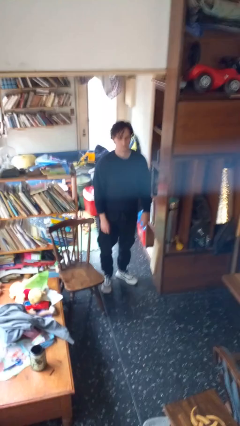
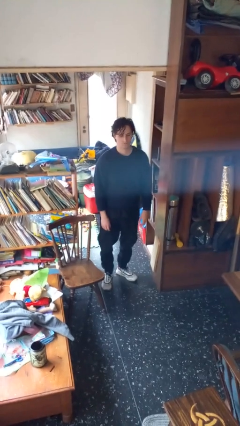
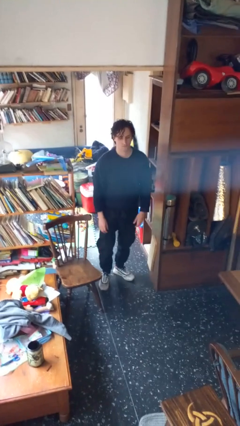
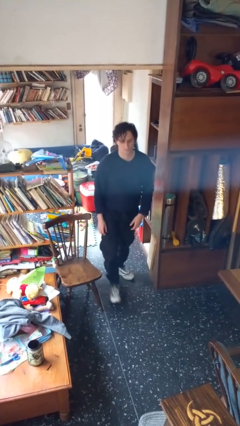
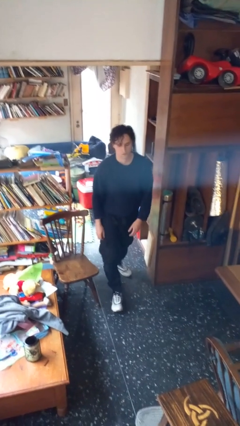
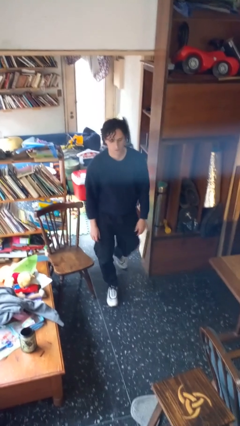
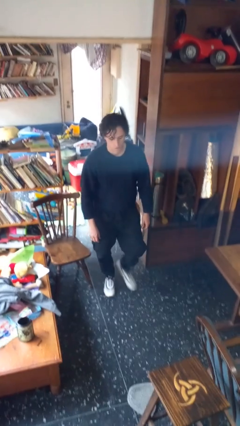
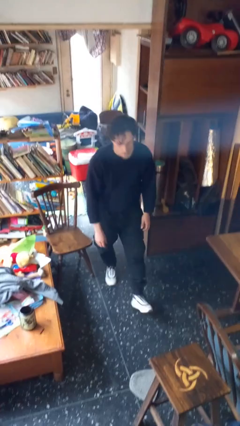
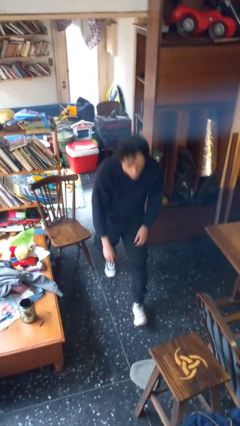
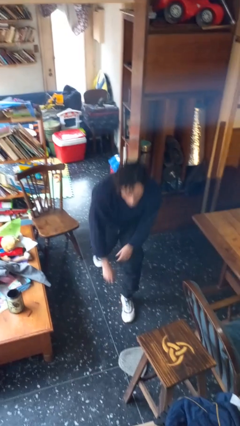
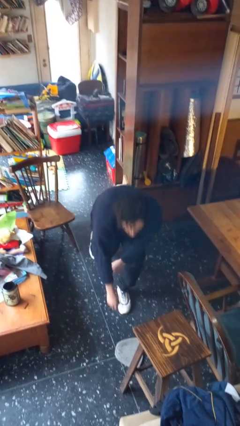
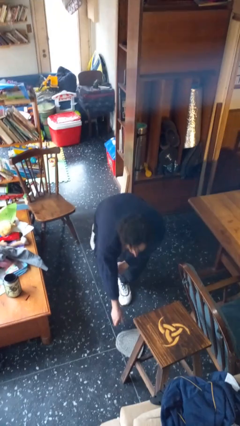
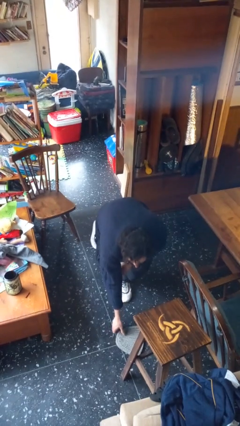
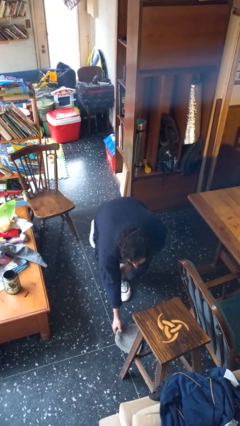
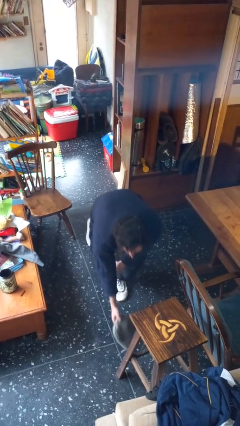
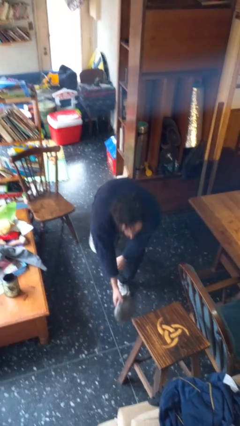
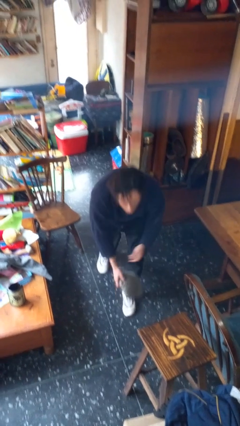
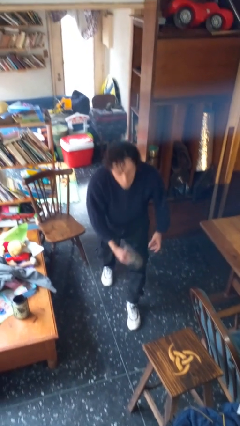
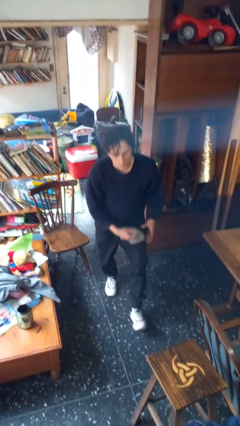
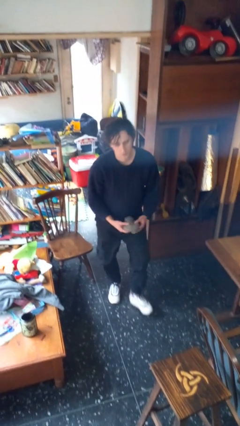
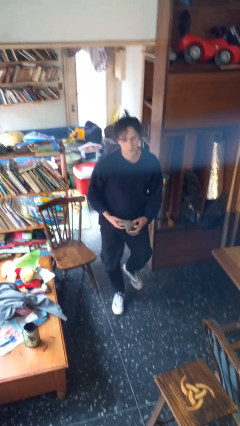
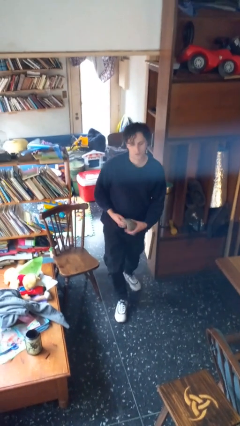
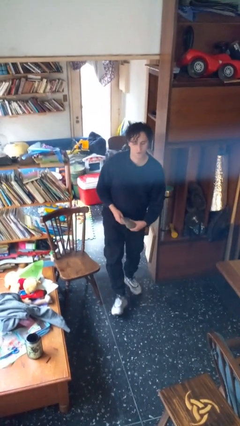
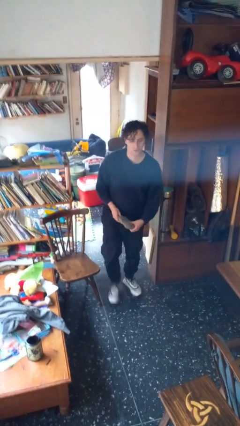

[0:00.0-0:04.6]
person picks up object from floor

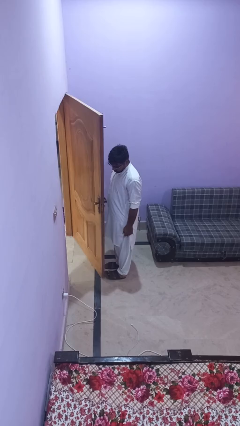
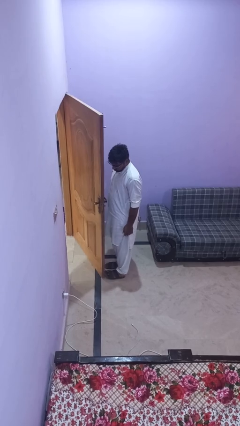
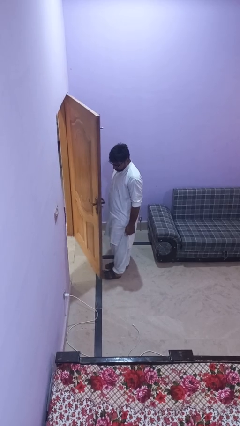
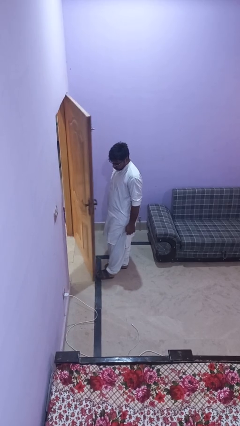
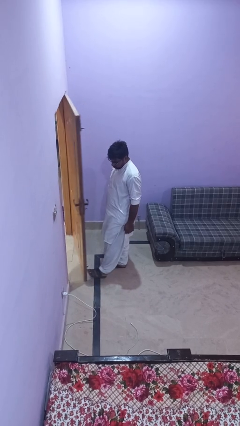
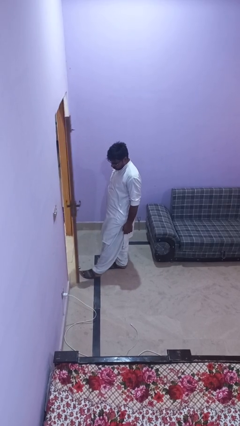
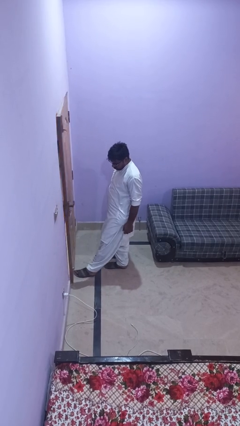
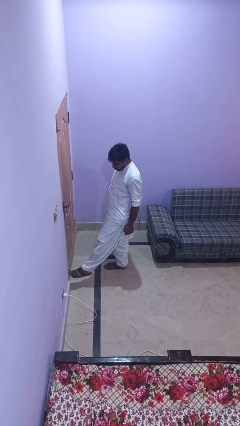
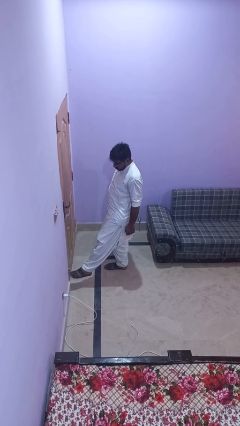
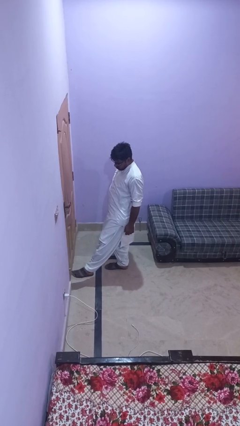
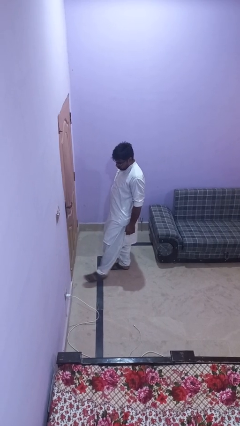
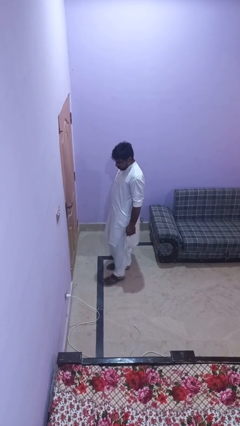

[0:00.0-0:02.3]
person closes door with foot

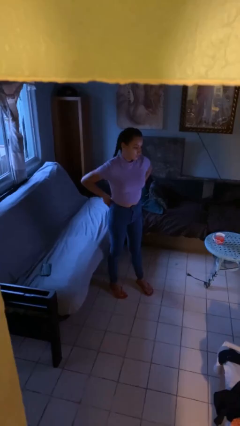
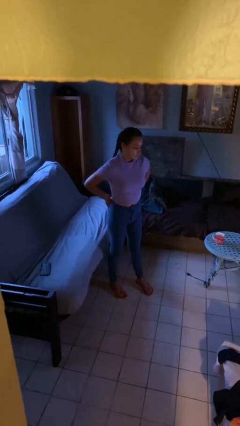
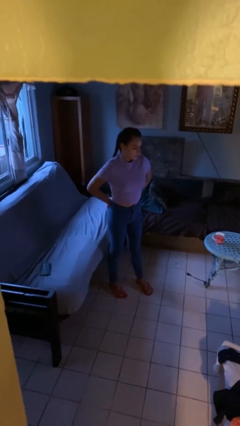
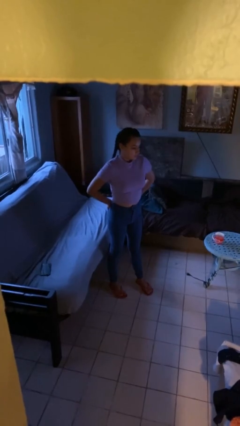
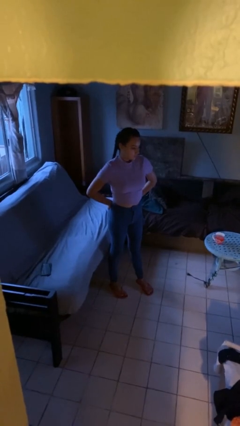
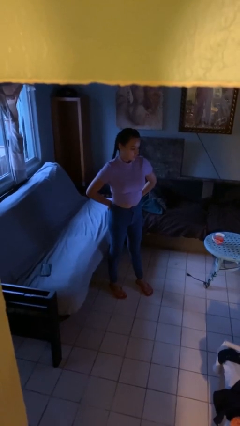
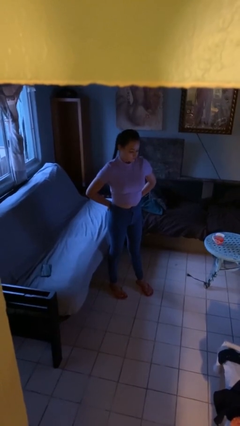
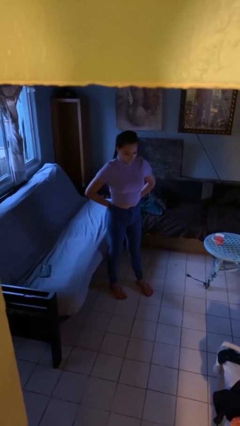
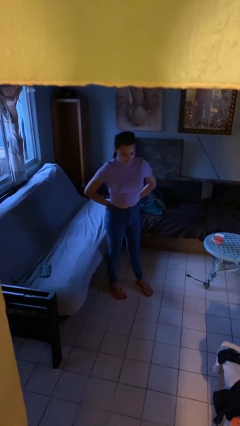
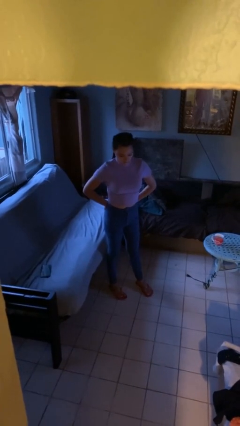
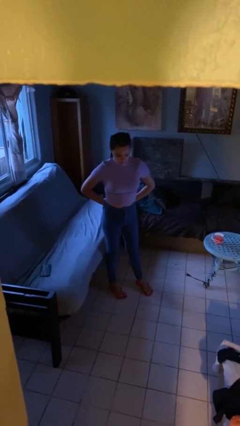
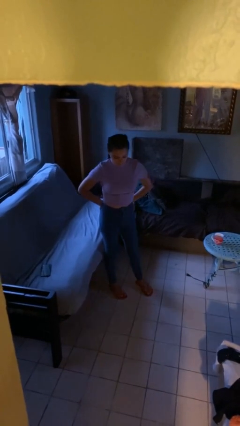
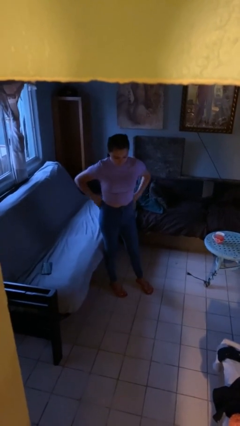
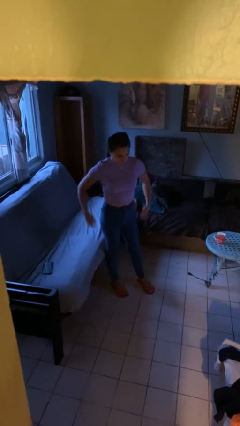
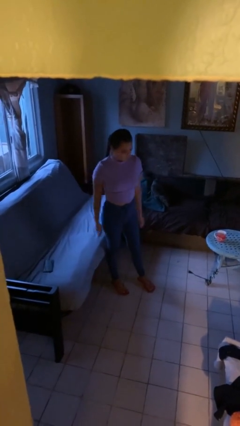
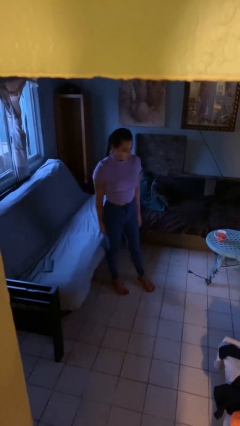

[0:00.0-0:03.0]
person puts hands in back pockets

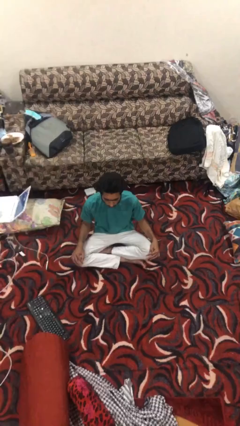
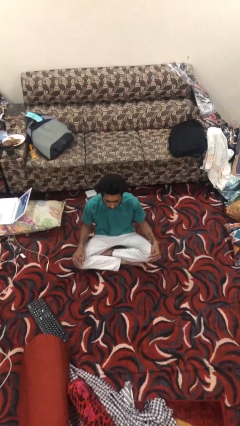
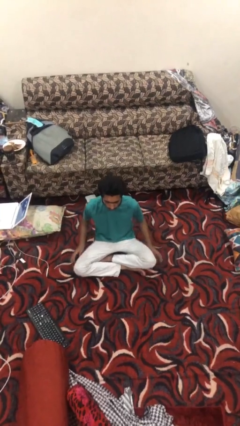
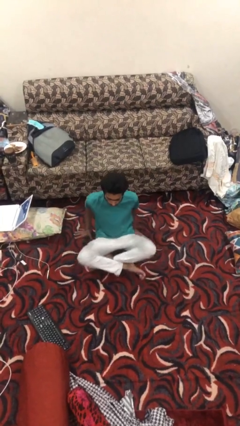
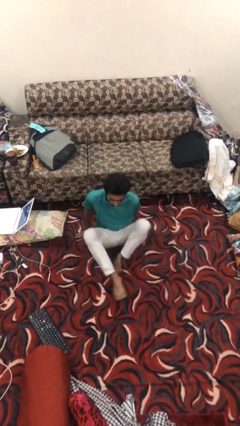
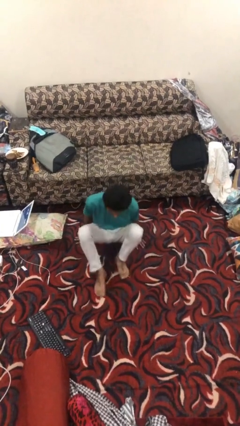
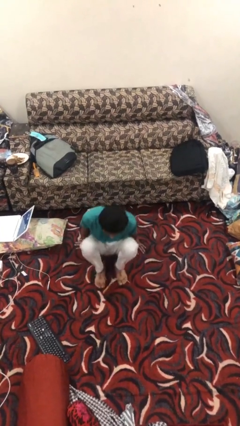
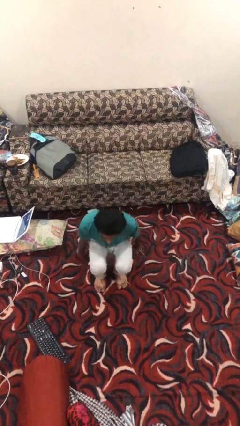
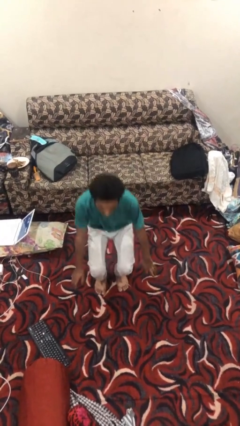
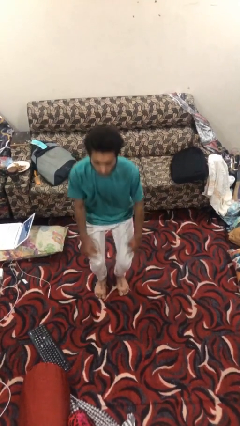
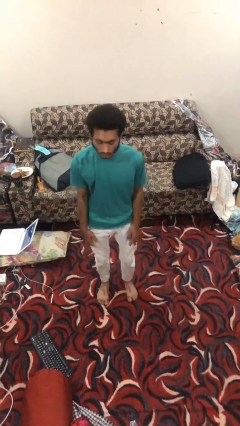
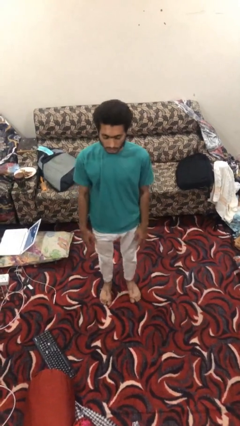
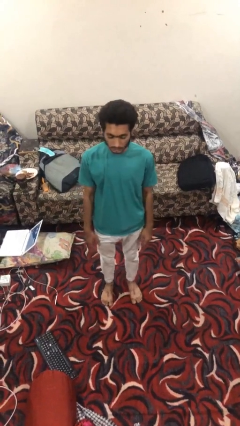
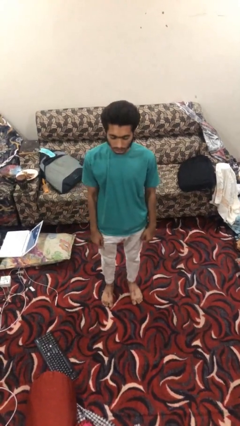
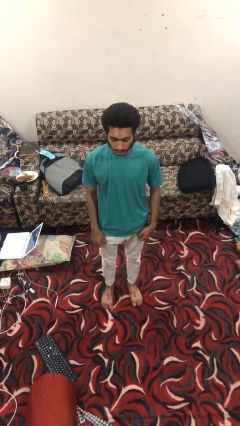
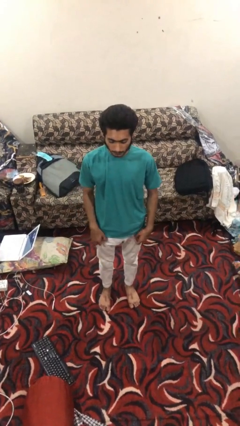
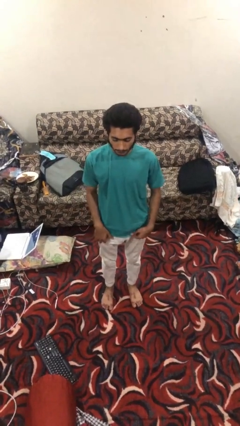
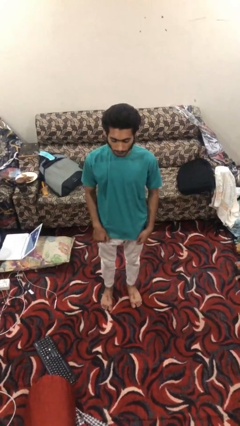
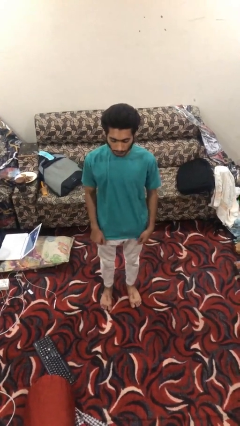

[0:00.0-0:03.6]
person stands up from floor

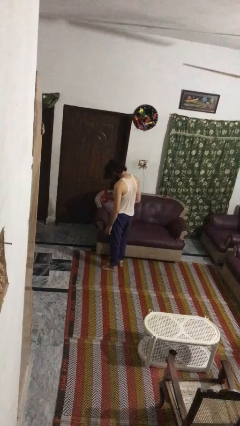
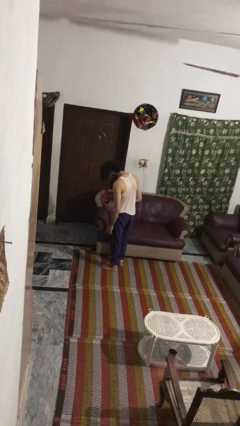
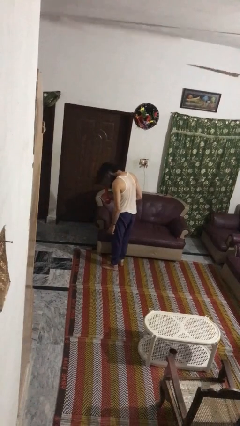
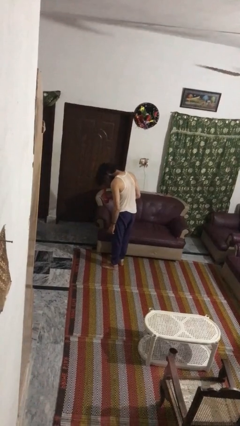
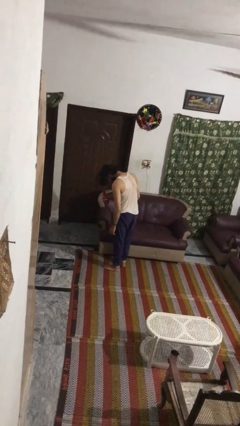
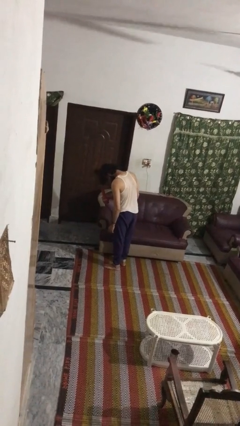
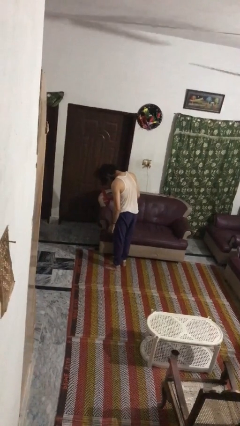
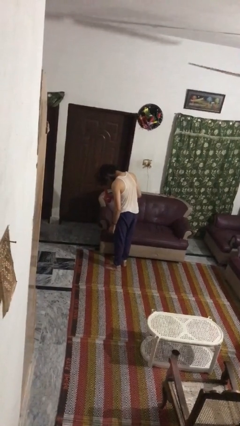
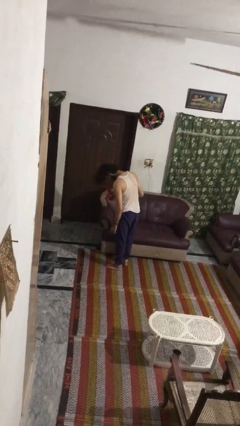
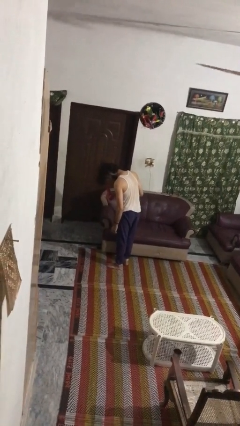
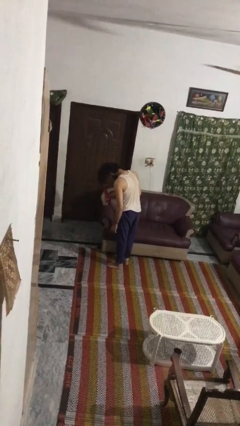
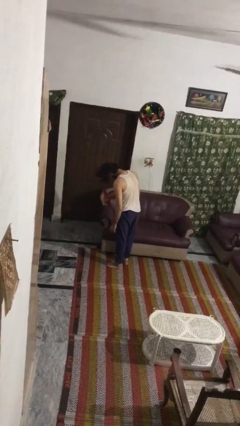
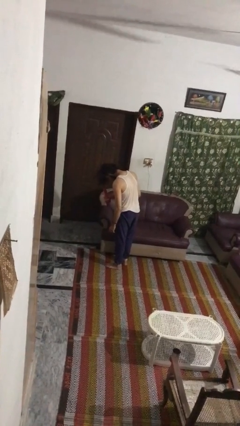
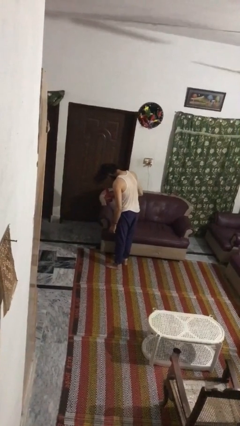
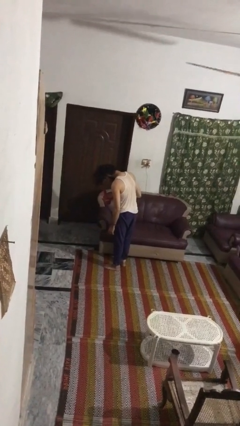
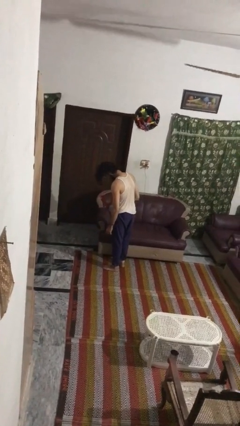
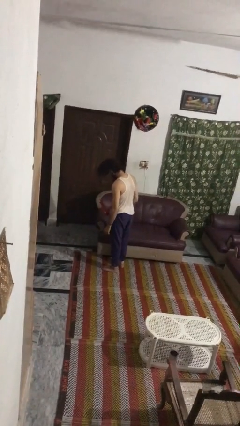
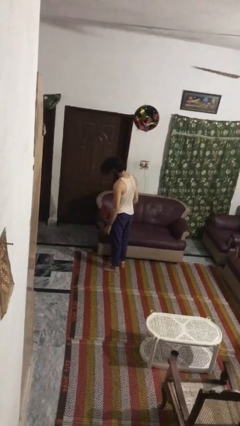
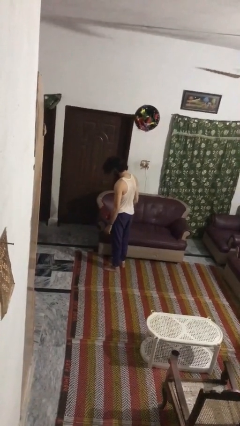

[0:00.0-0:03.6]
person dries hair with hairdryer
